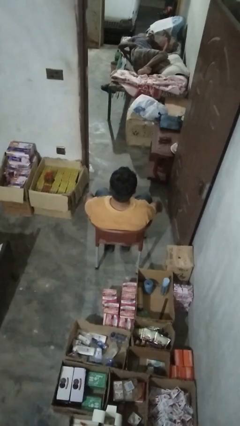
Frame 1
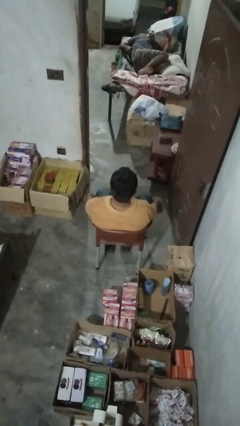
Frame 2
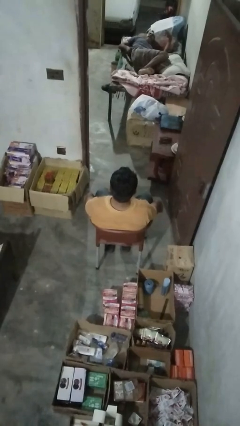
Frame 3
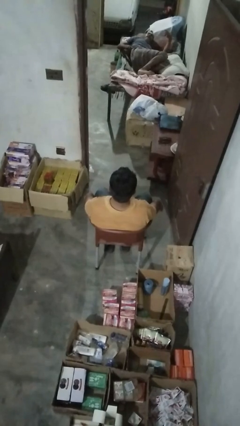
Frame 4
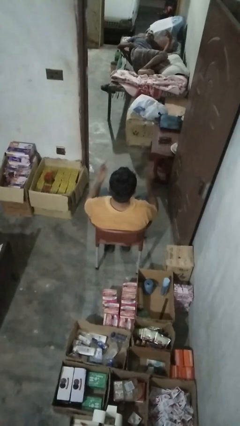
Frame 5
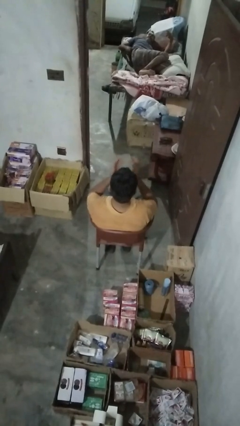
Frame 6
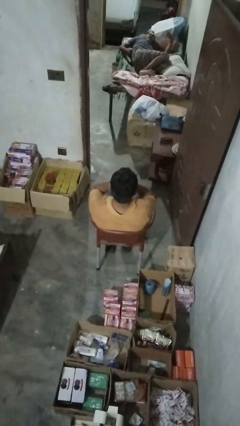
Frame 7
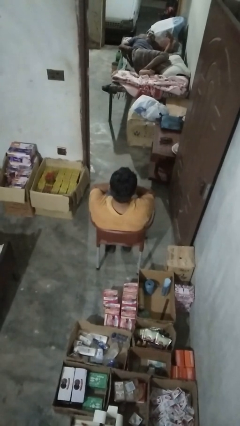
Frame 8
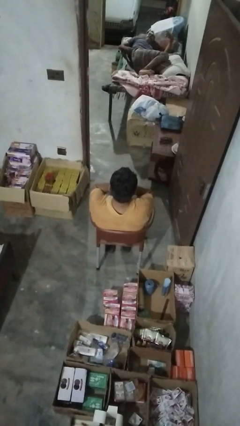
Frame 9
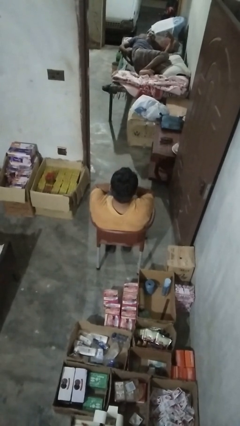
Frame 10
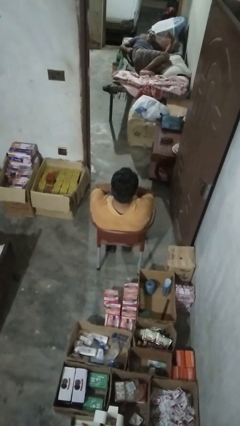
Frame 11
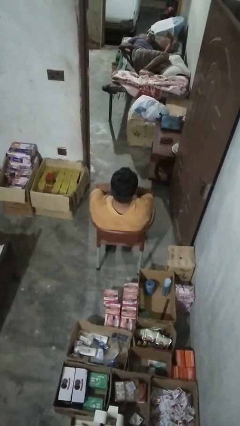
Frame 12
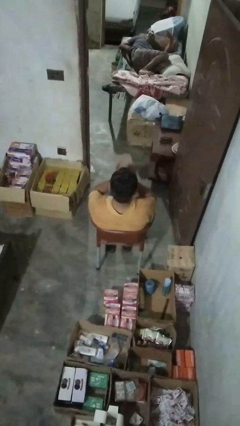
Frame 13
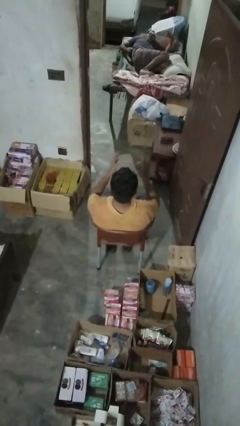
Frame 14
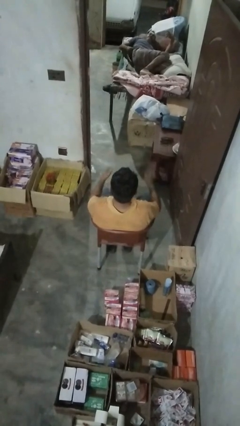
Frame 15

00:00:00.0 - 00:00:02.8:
person covers face with hands

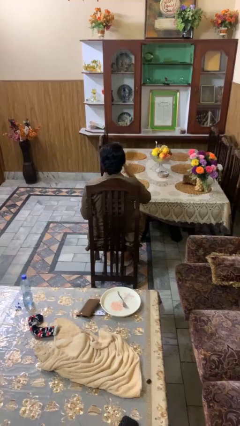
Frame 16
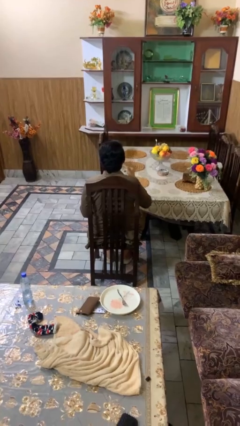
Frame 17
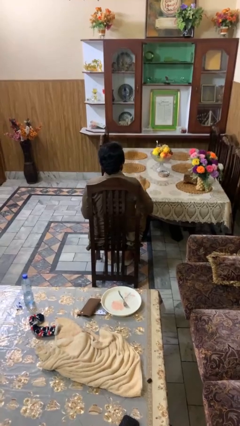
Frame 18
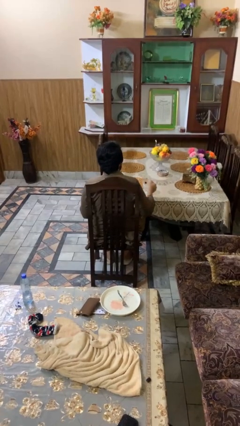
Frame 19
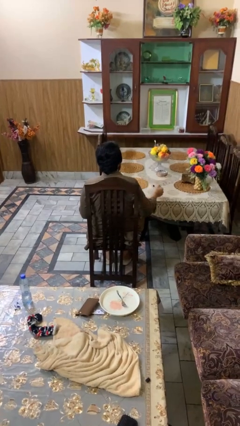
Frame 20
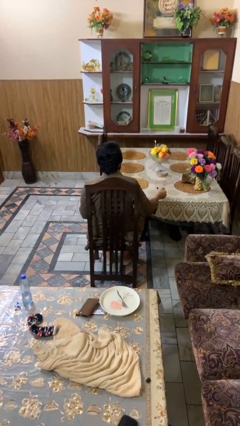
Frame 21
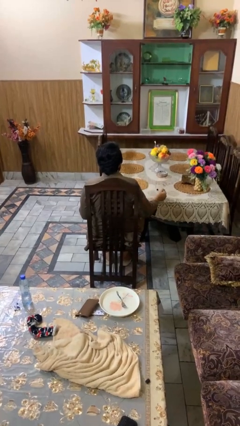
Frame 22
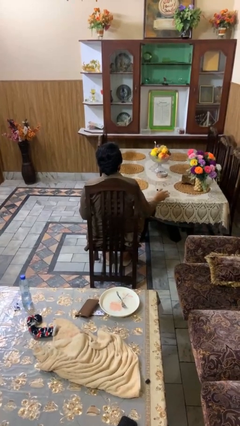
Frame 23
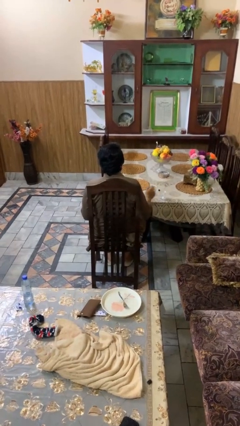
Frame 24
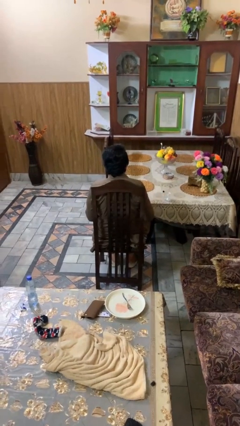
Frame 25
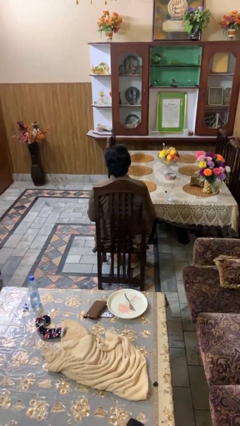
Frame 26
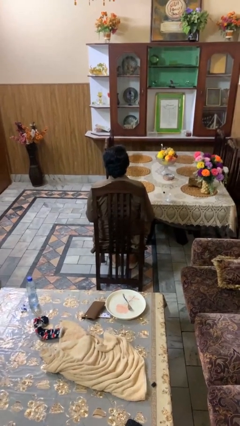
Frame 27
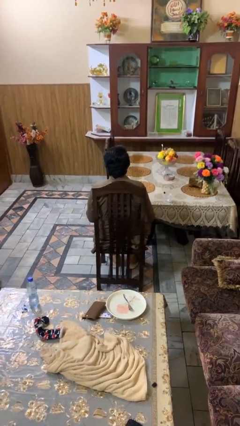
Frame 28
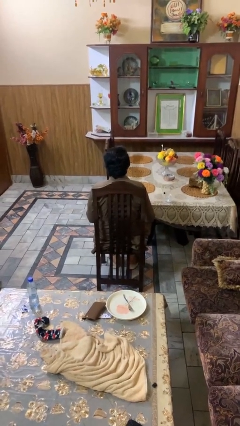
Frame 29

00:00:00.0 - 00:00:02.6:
person puts down object on table

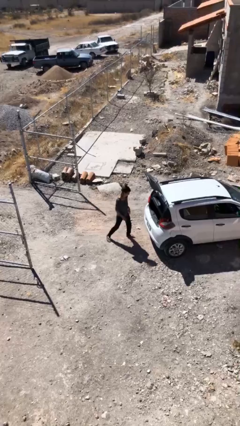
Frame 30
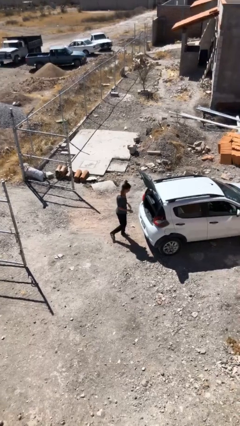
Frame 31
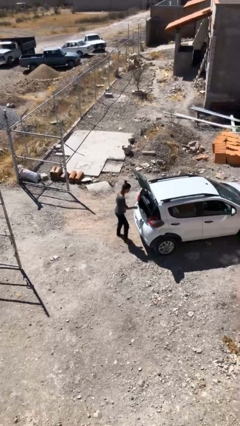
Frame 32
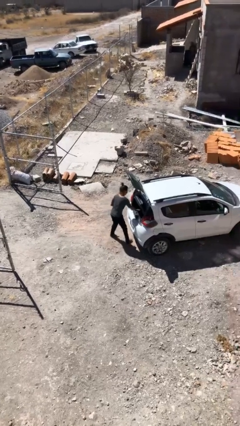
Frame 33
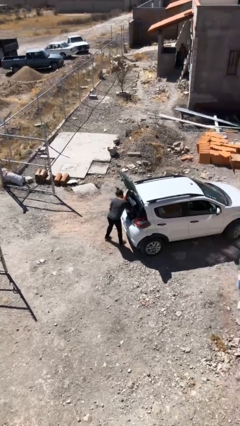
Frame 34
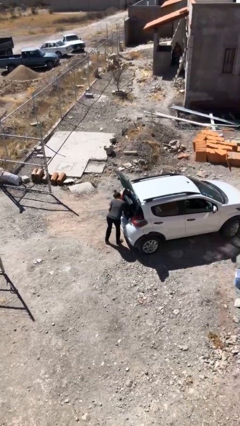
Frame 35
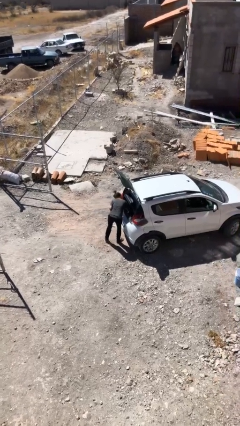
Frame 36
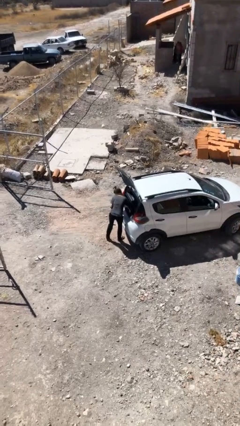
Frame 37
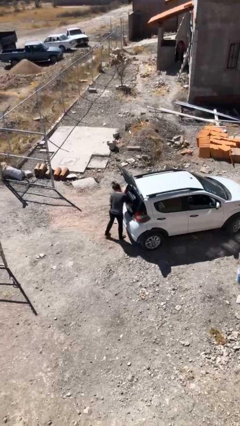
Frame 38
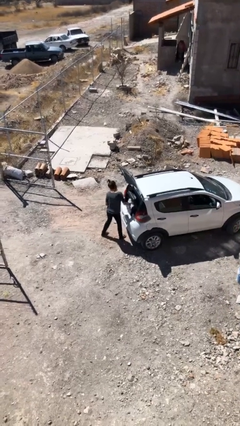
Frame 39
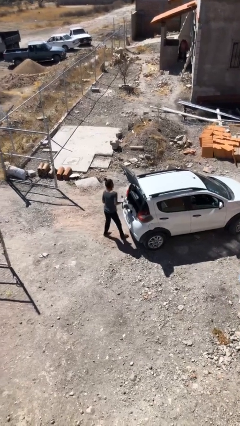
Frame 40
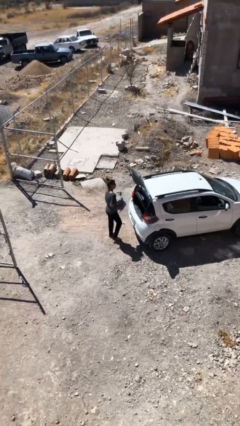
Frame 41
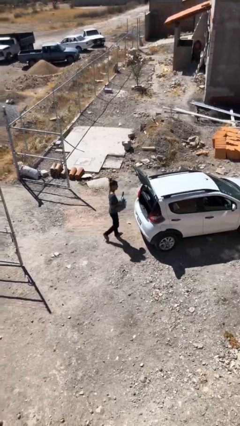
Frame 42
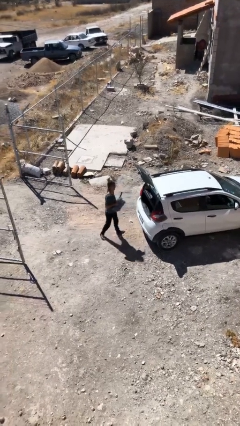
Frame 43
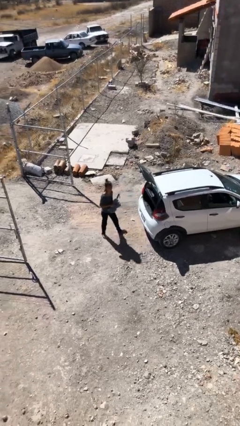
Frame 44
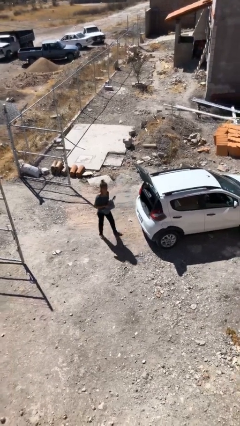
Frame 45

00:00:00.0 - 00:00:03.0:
person unloads car

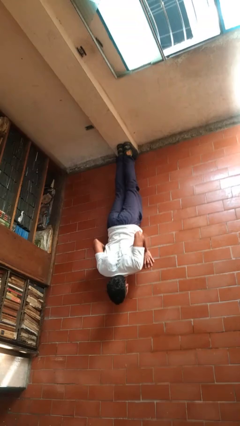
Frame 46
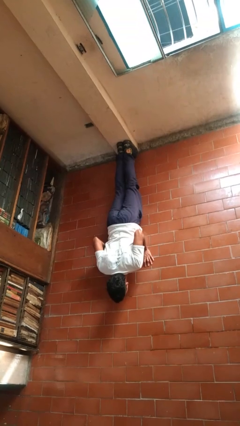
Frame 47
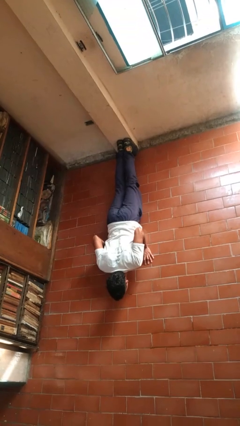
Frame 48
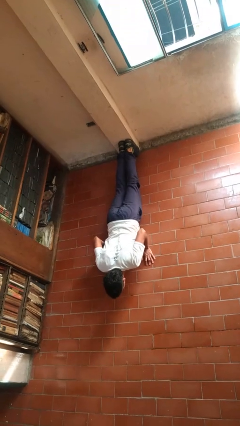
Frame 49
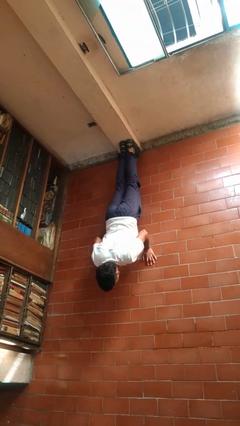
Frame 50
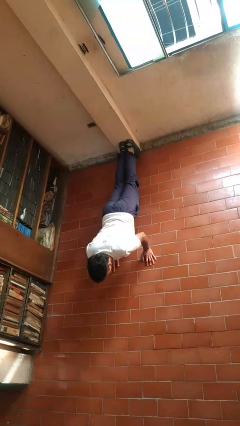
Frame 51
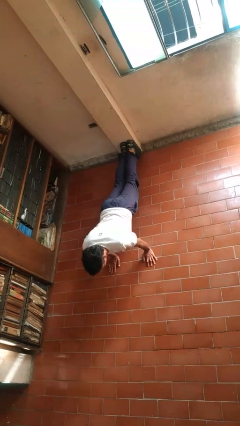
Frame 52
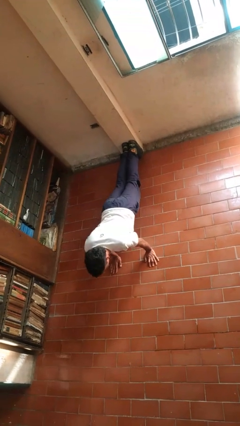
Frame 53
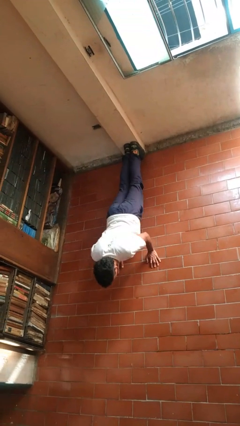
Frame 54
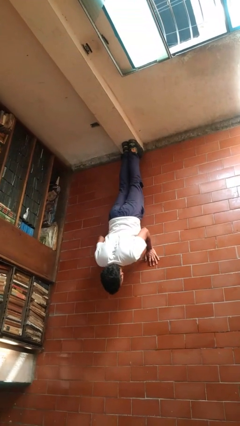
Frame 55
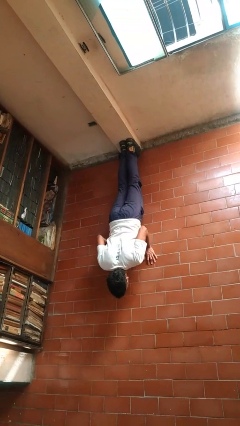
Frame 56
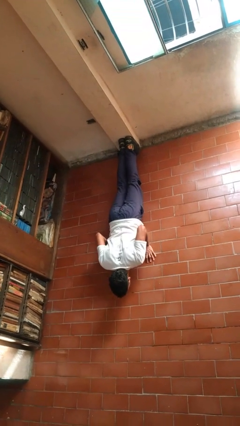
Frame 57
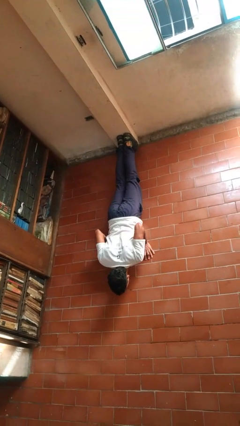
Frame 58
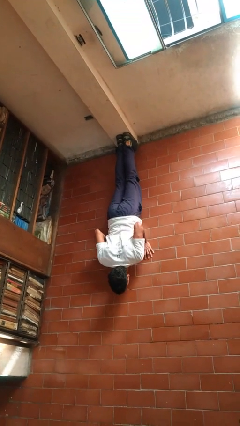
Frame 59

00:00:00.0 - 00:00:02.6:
person exercises with pushup

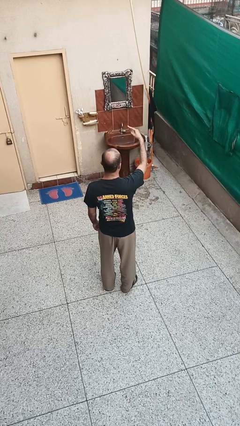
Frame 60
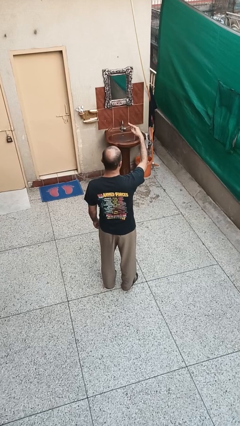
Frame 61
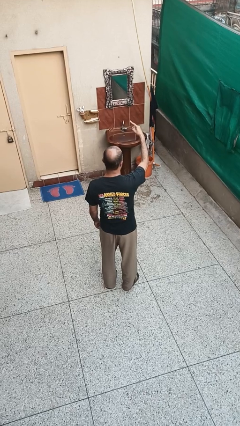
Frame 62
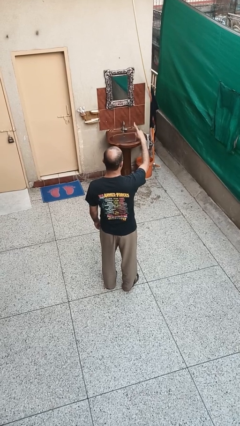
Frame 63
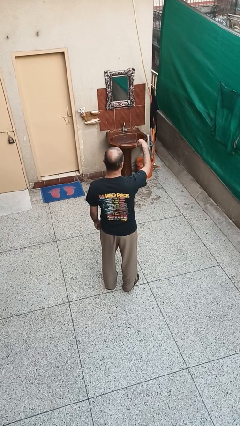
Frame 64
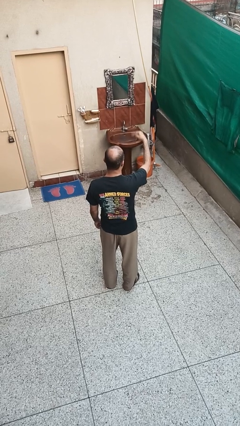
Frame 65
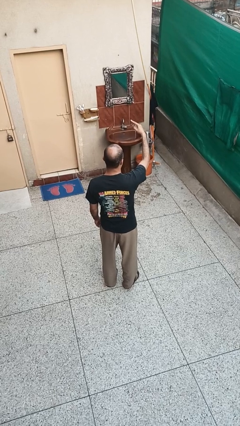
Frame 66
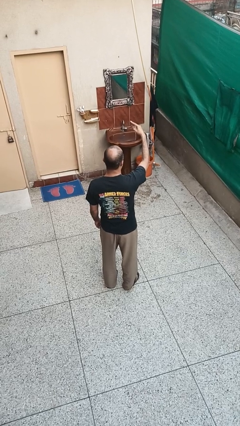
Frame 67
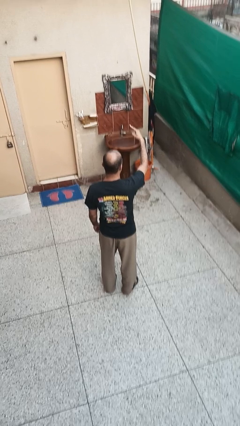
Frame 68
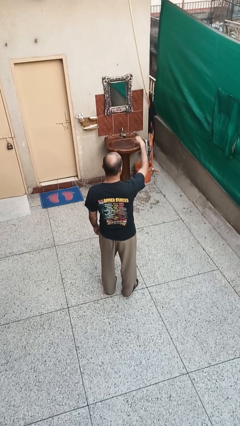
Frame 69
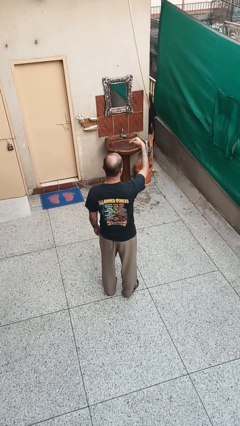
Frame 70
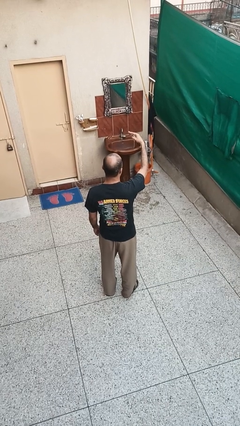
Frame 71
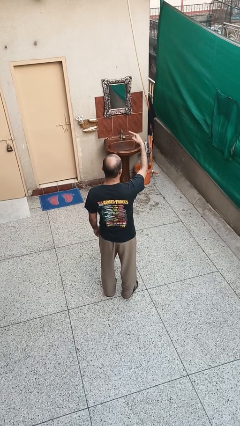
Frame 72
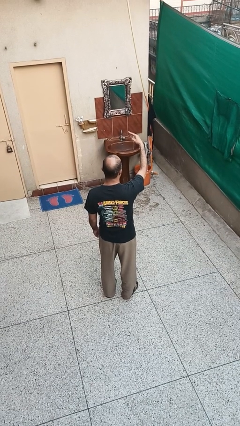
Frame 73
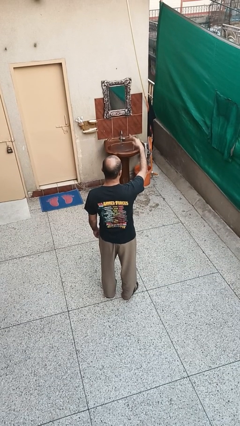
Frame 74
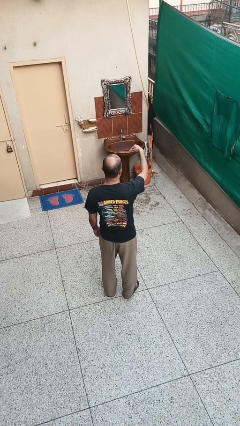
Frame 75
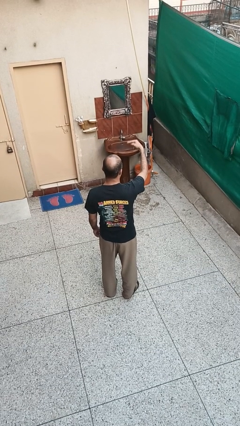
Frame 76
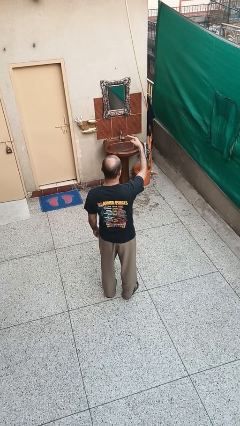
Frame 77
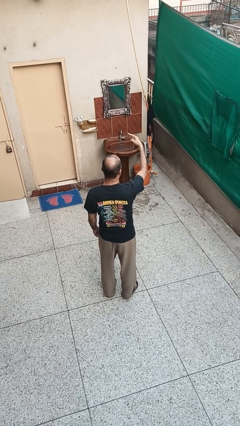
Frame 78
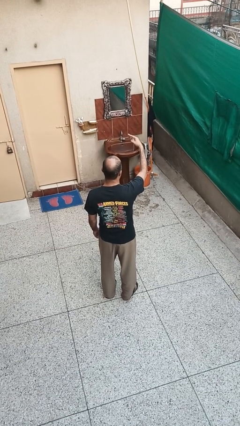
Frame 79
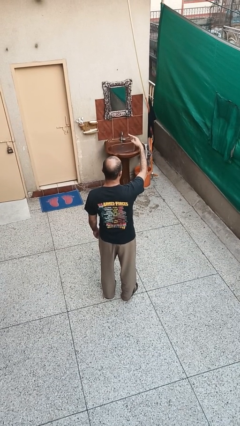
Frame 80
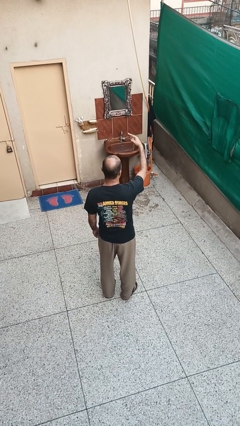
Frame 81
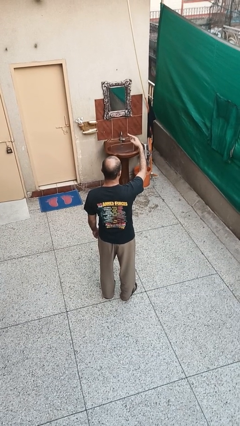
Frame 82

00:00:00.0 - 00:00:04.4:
person gestures swipe down

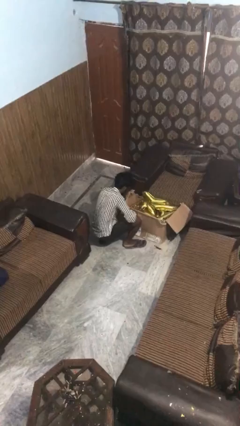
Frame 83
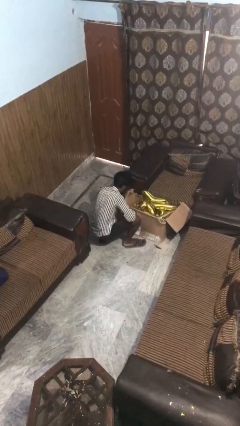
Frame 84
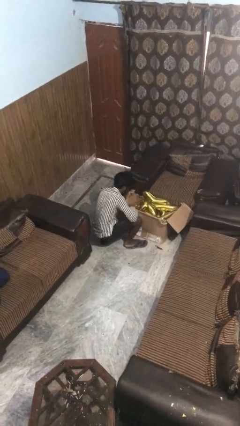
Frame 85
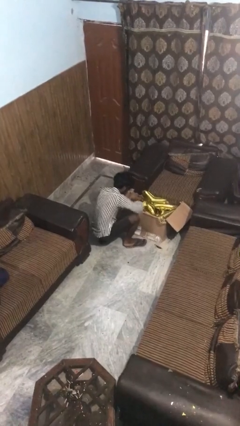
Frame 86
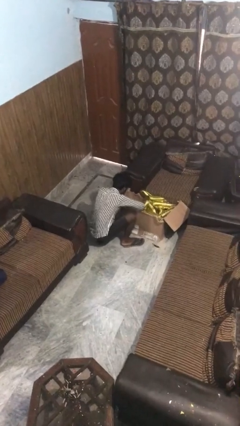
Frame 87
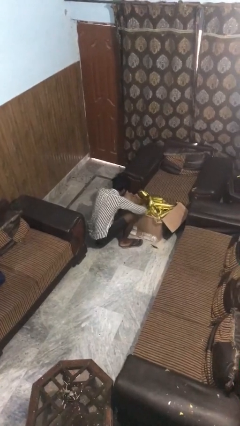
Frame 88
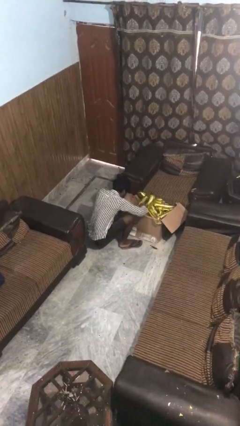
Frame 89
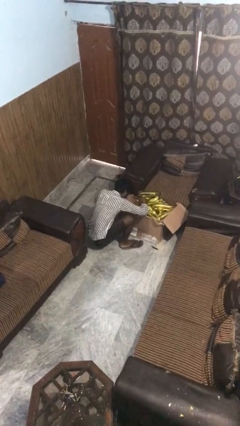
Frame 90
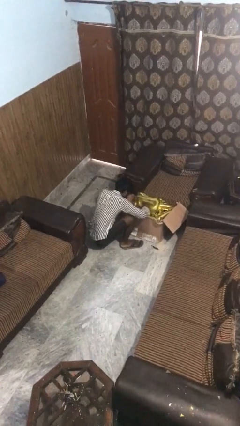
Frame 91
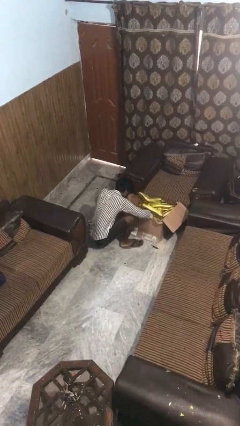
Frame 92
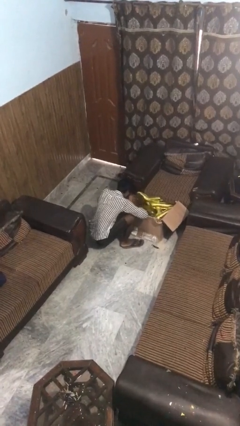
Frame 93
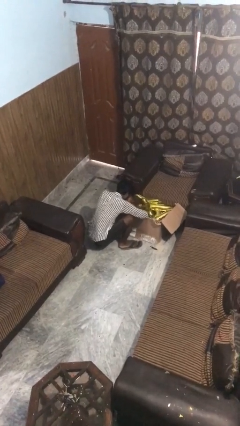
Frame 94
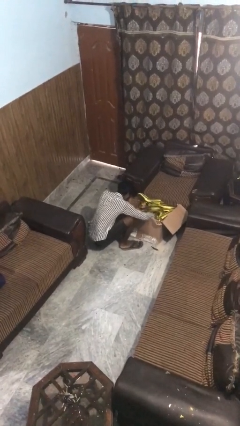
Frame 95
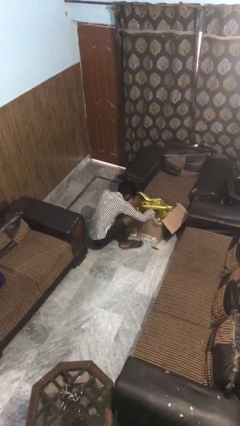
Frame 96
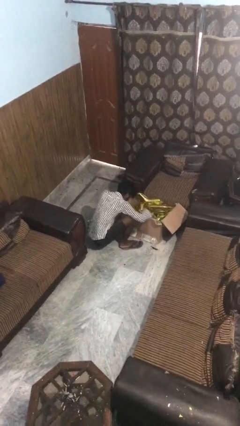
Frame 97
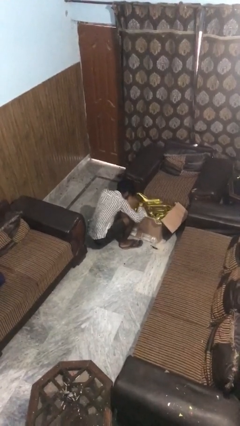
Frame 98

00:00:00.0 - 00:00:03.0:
person searches in box
